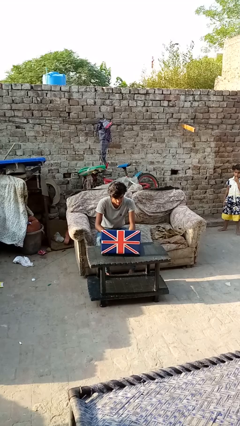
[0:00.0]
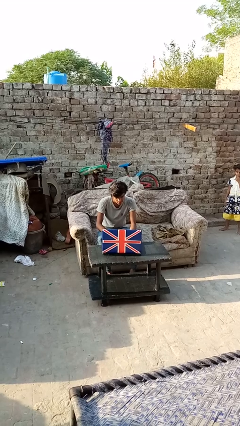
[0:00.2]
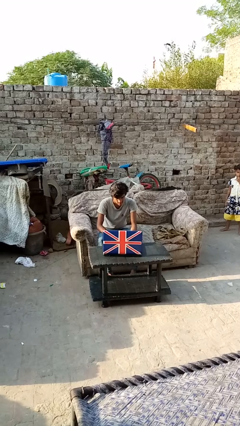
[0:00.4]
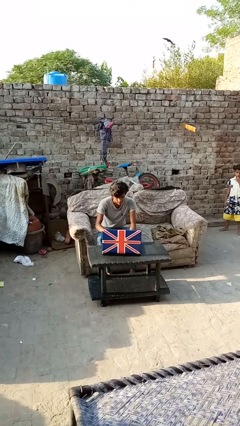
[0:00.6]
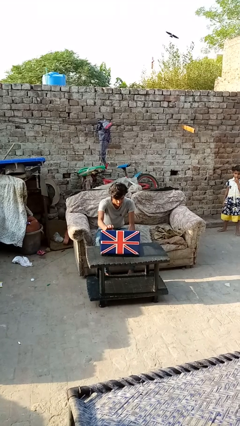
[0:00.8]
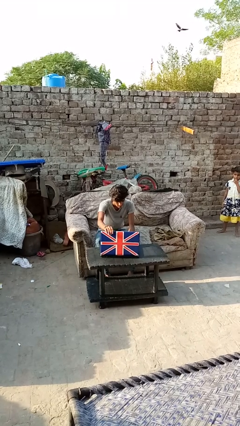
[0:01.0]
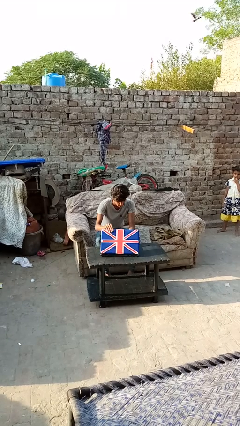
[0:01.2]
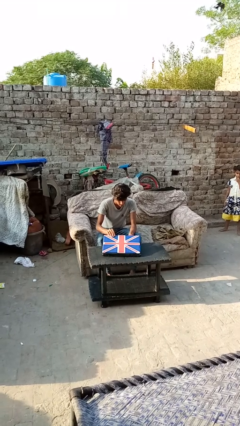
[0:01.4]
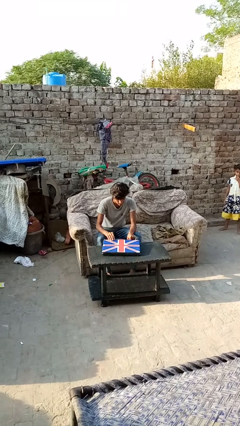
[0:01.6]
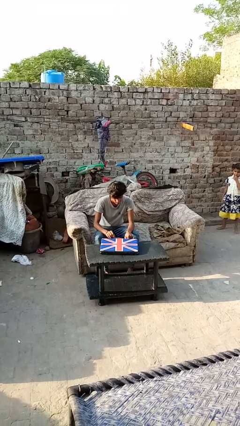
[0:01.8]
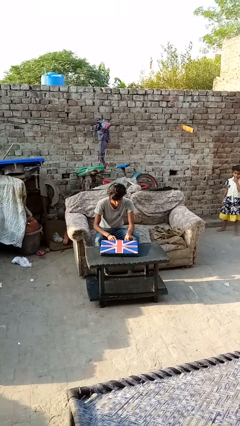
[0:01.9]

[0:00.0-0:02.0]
person closes laptop

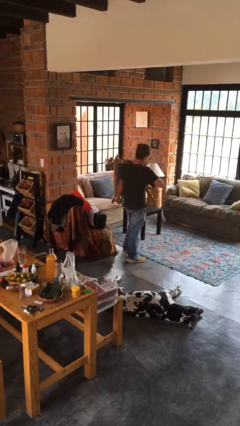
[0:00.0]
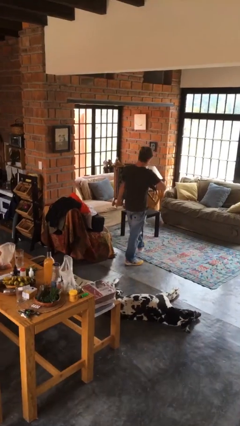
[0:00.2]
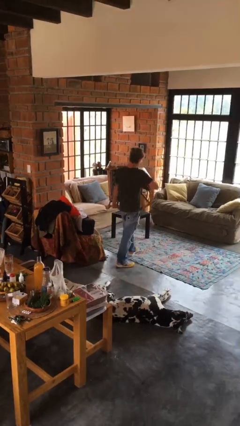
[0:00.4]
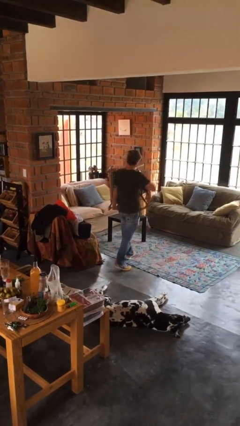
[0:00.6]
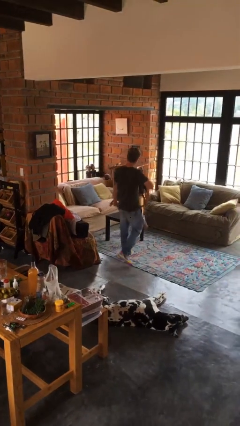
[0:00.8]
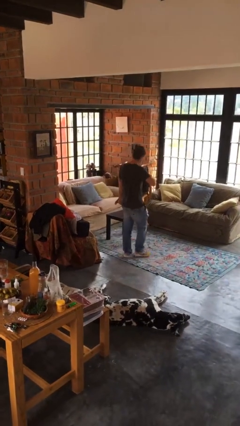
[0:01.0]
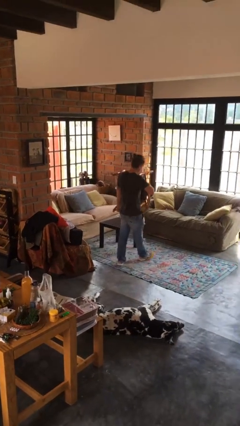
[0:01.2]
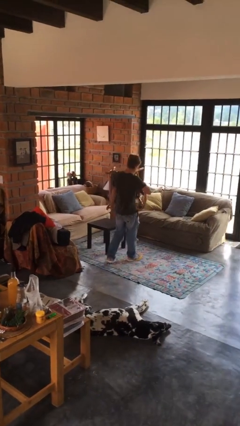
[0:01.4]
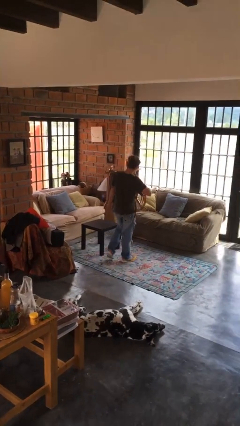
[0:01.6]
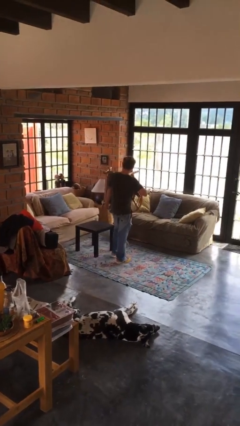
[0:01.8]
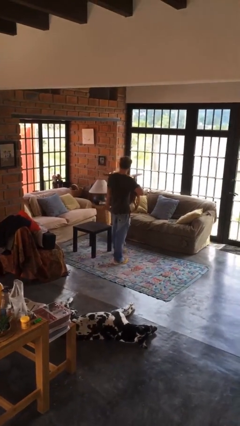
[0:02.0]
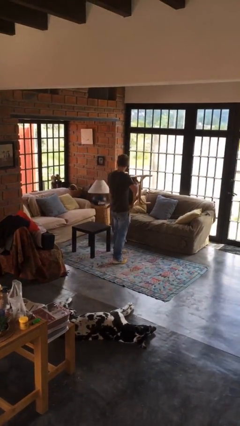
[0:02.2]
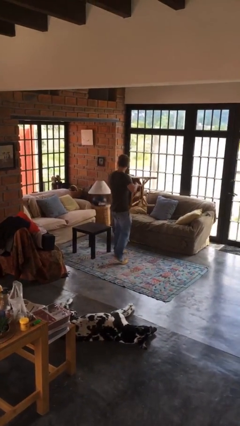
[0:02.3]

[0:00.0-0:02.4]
person carries furniture

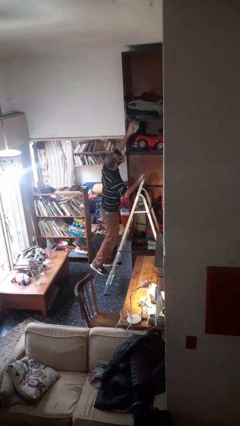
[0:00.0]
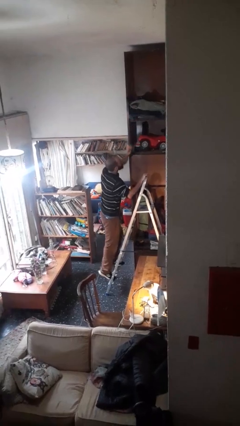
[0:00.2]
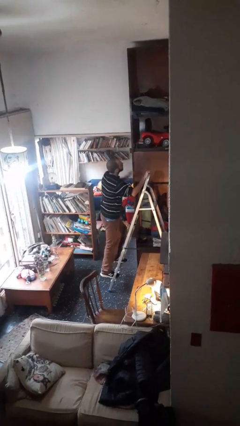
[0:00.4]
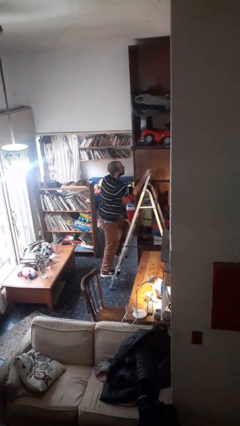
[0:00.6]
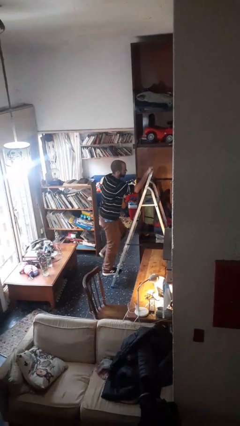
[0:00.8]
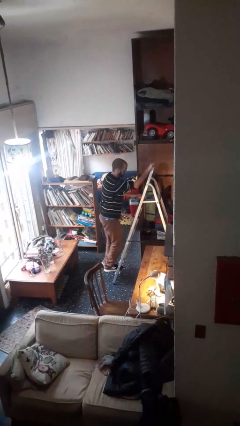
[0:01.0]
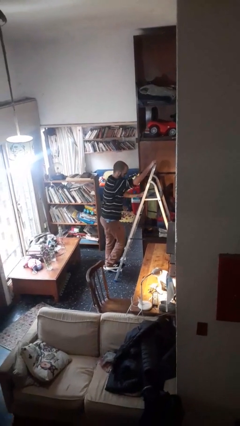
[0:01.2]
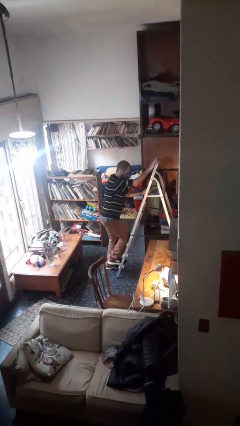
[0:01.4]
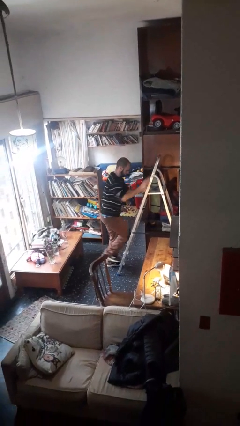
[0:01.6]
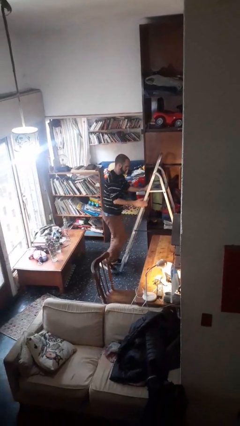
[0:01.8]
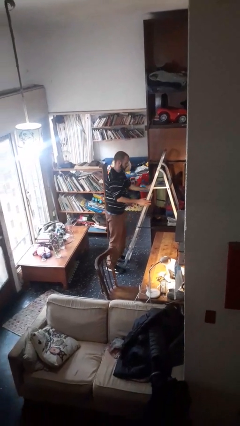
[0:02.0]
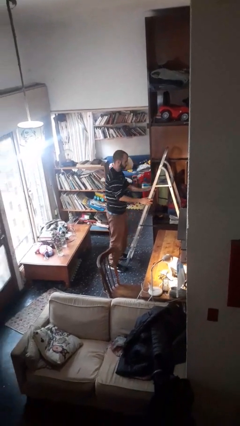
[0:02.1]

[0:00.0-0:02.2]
person climbs down ladder

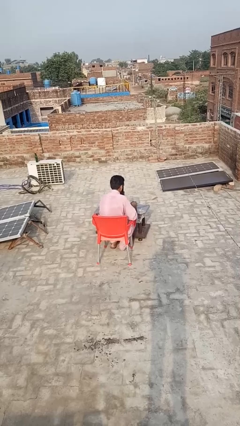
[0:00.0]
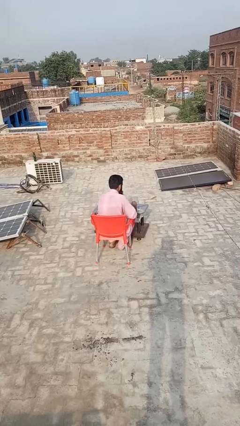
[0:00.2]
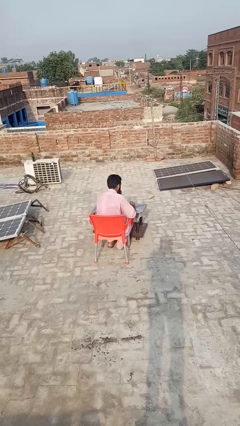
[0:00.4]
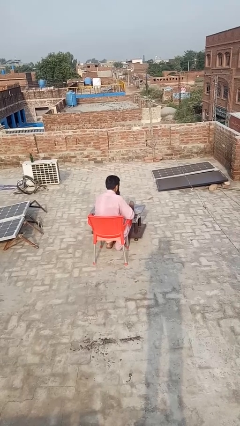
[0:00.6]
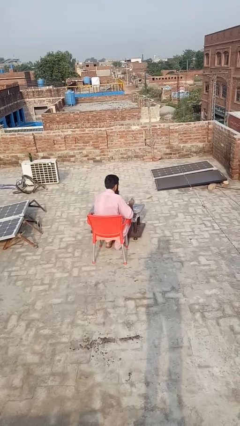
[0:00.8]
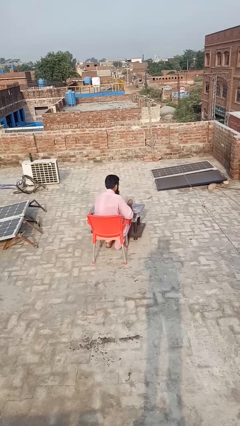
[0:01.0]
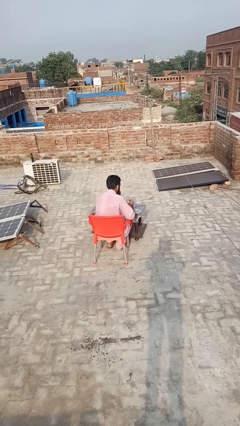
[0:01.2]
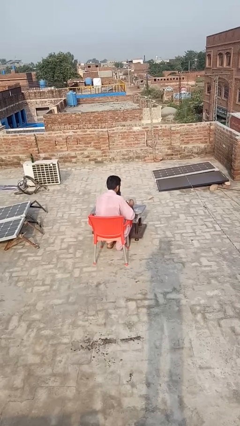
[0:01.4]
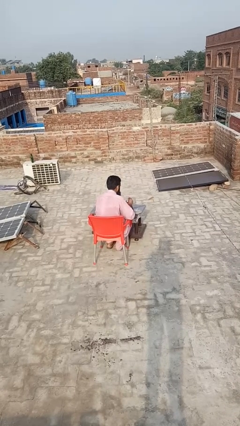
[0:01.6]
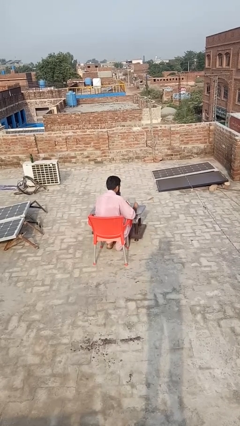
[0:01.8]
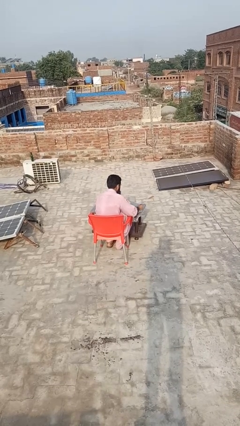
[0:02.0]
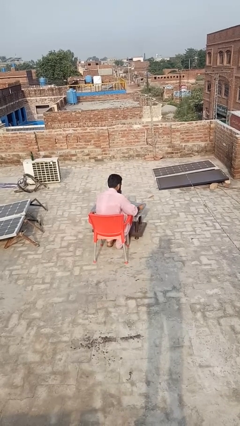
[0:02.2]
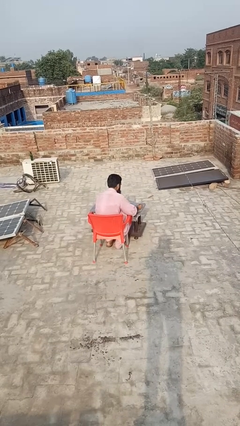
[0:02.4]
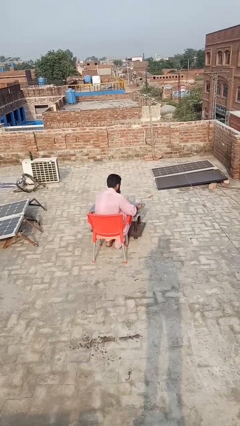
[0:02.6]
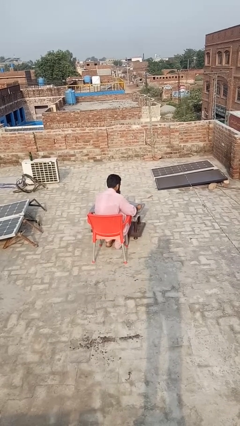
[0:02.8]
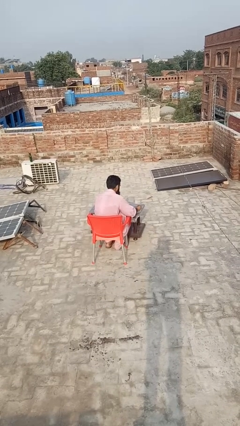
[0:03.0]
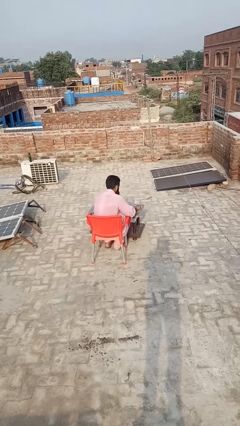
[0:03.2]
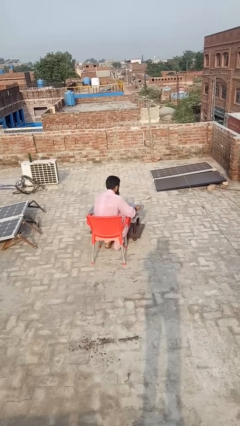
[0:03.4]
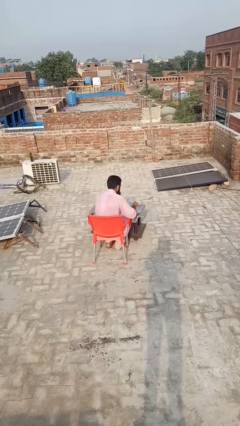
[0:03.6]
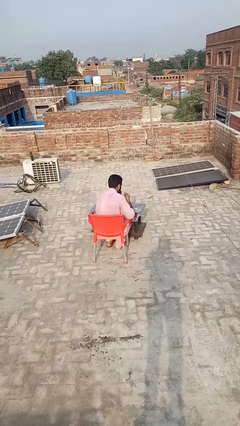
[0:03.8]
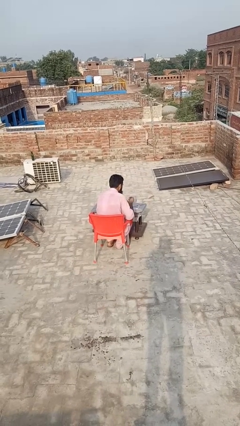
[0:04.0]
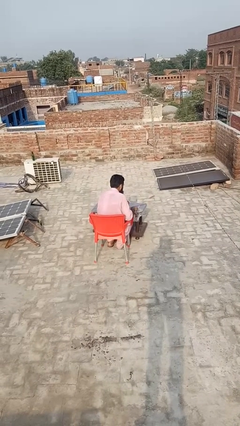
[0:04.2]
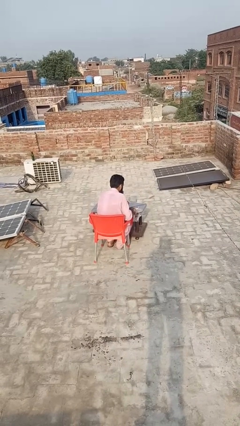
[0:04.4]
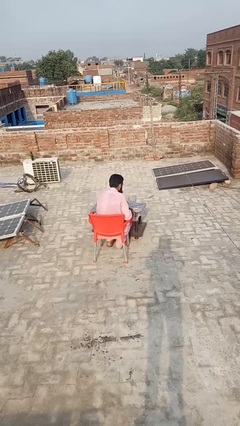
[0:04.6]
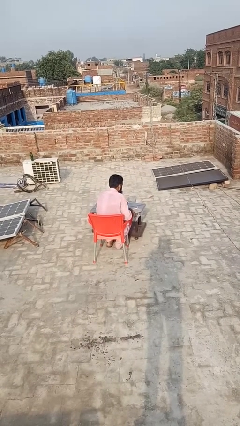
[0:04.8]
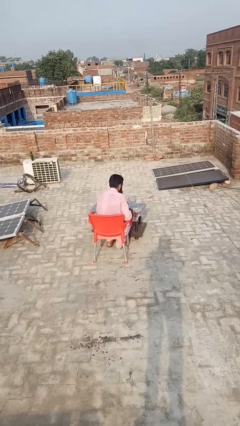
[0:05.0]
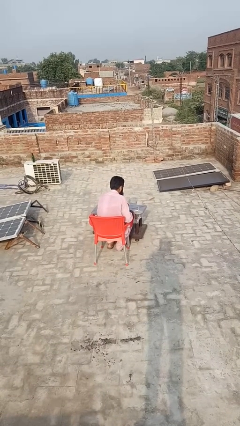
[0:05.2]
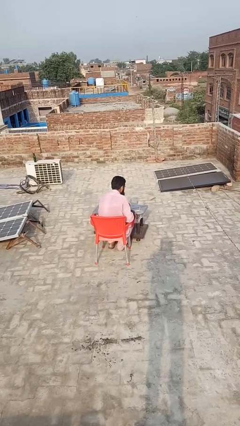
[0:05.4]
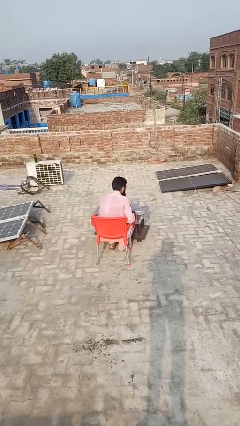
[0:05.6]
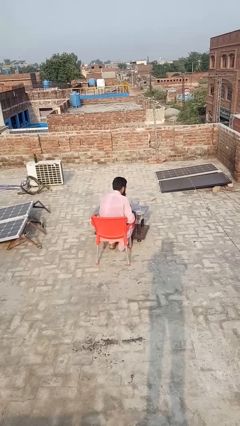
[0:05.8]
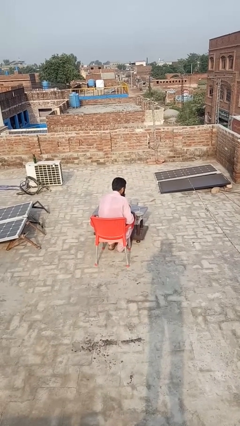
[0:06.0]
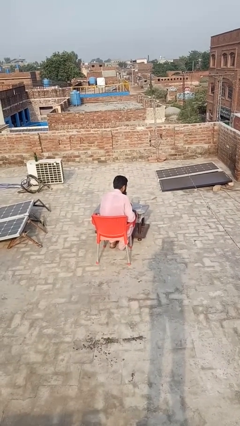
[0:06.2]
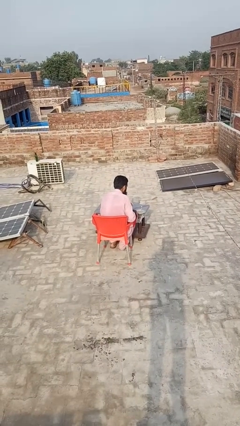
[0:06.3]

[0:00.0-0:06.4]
person lights candle

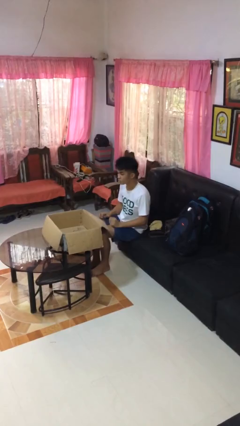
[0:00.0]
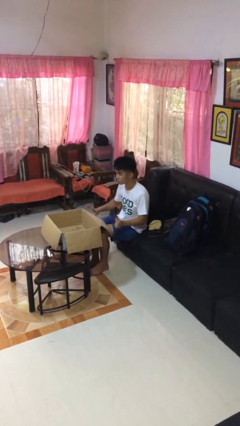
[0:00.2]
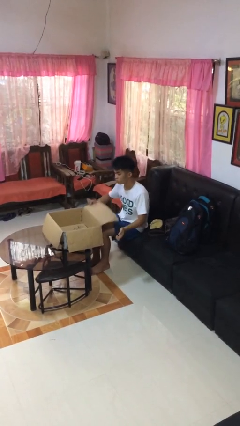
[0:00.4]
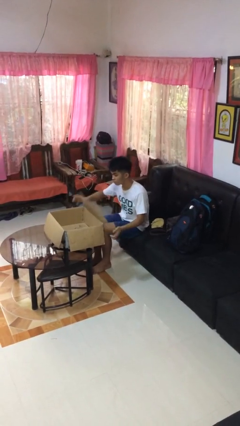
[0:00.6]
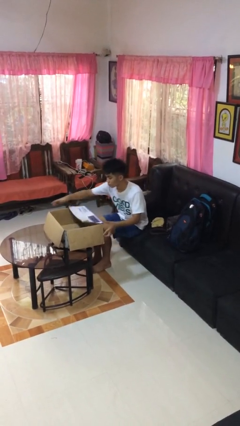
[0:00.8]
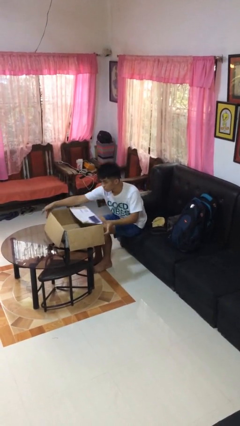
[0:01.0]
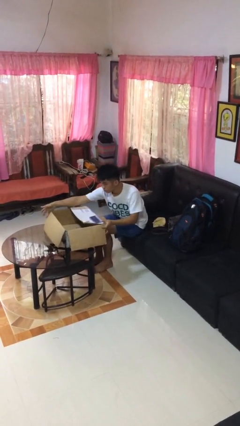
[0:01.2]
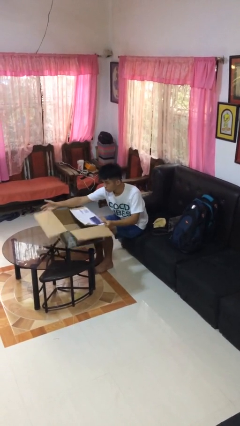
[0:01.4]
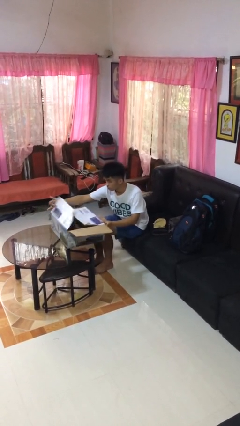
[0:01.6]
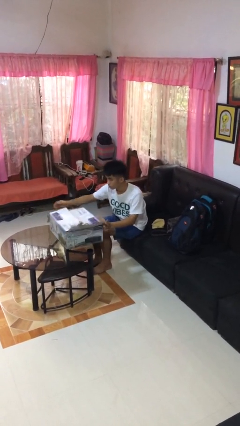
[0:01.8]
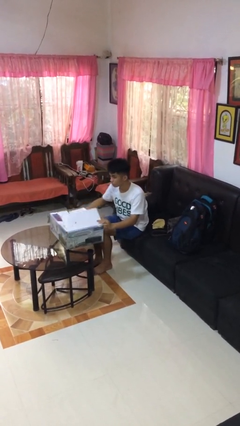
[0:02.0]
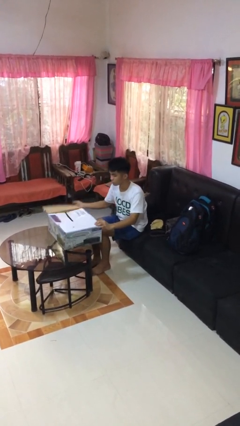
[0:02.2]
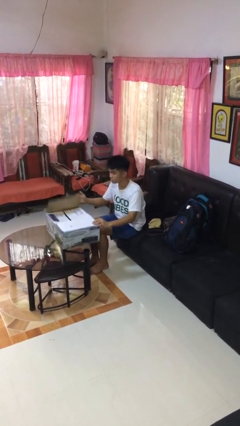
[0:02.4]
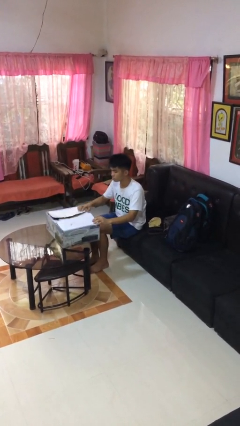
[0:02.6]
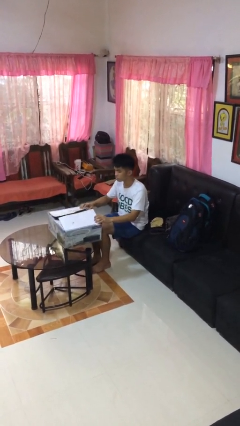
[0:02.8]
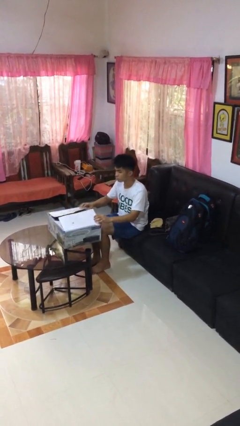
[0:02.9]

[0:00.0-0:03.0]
person closes box

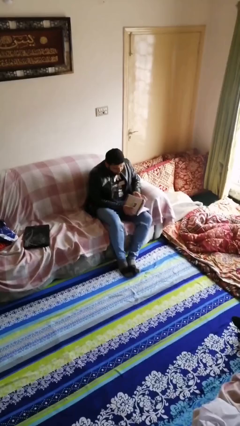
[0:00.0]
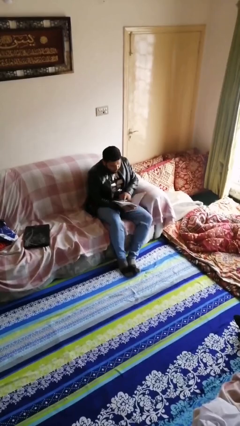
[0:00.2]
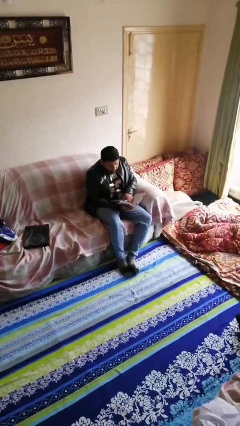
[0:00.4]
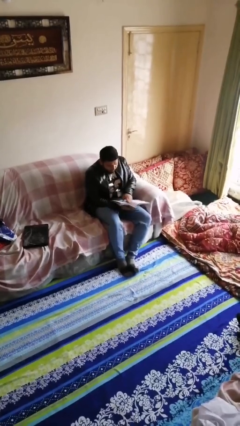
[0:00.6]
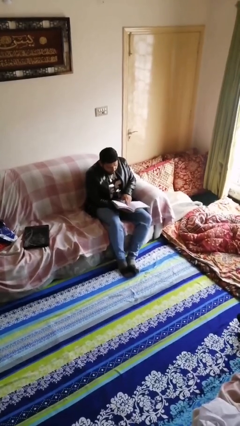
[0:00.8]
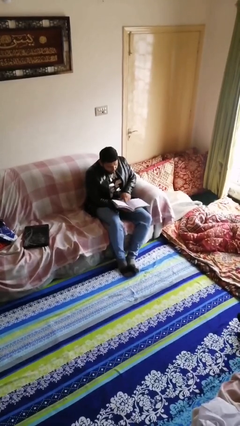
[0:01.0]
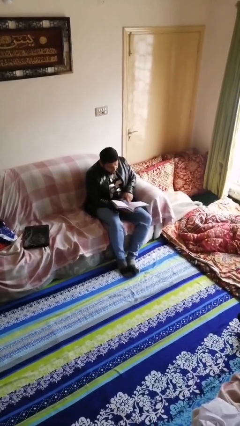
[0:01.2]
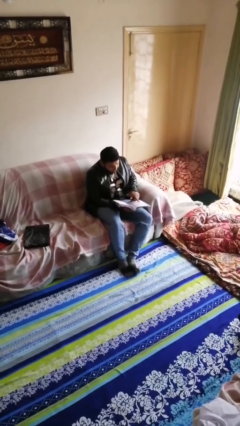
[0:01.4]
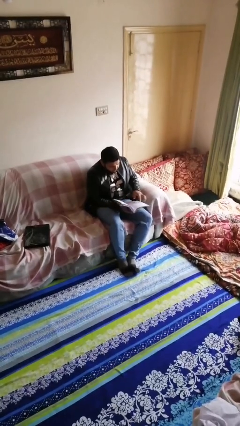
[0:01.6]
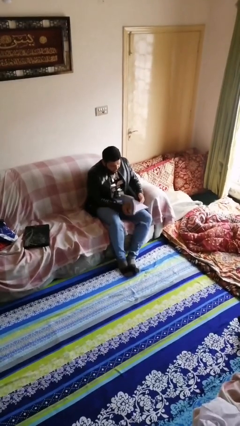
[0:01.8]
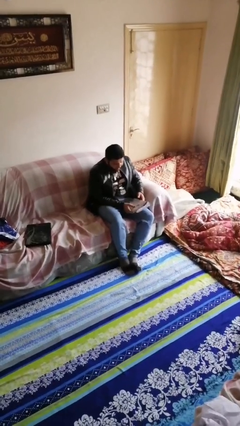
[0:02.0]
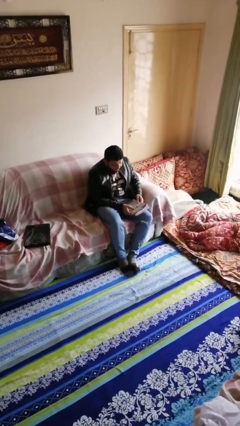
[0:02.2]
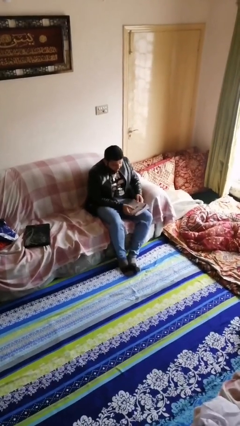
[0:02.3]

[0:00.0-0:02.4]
person reads document
